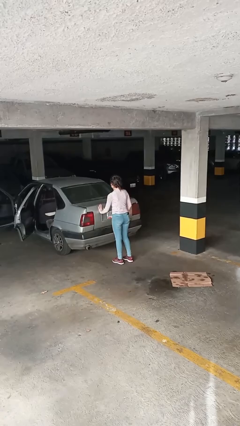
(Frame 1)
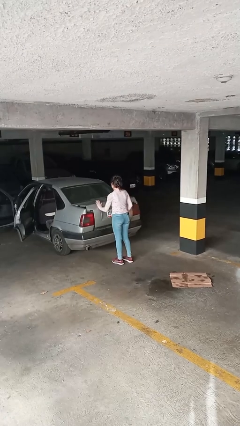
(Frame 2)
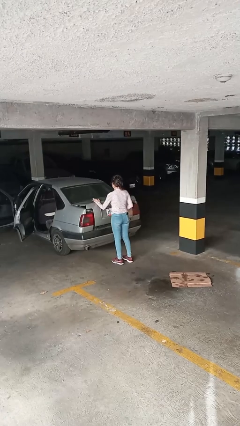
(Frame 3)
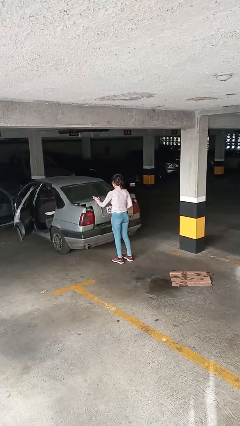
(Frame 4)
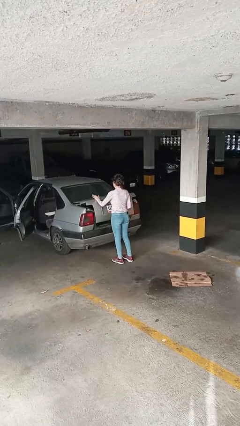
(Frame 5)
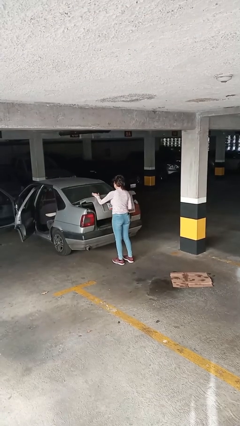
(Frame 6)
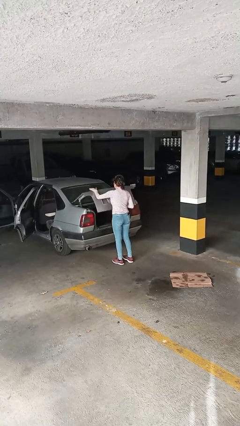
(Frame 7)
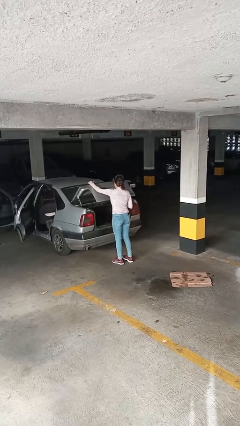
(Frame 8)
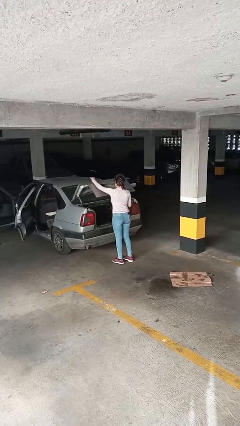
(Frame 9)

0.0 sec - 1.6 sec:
person opens car trunk

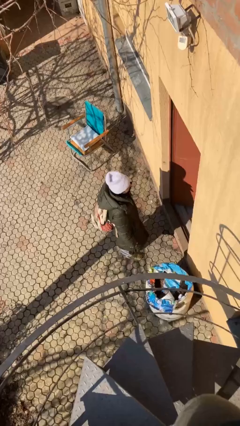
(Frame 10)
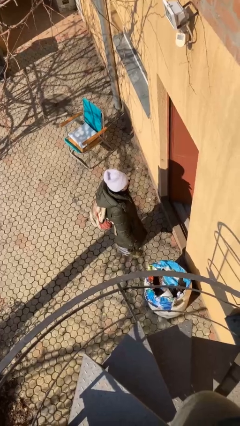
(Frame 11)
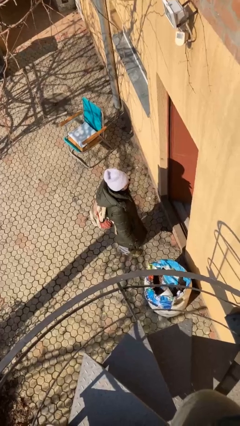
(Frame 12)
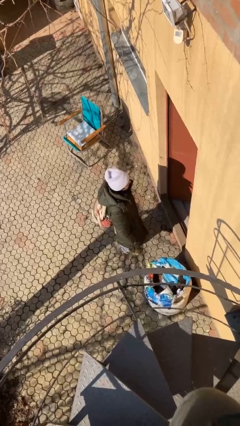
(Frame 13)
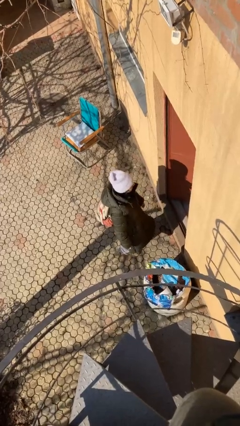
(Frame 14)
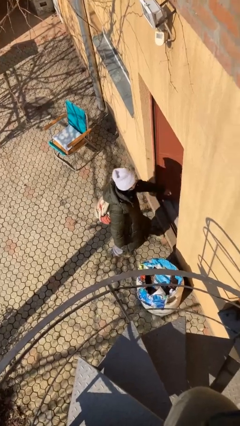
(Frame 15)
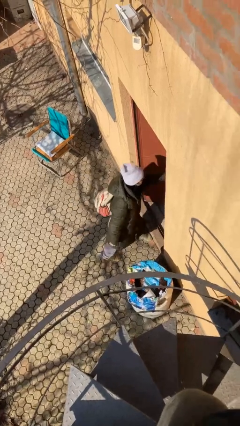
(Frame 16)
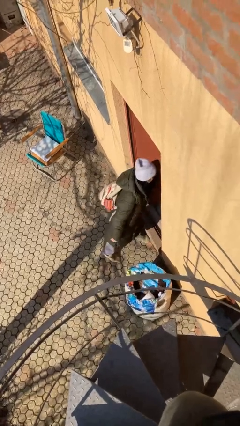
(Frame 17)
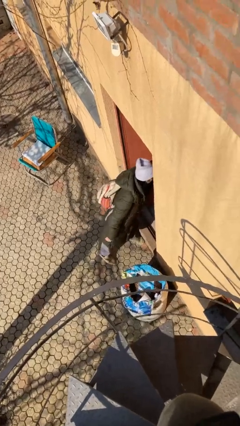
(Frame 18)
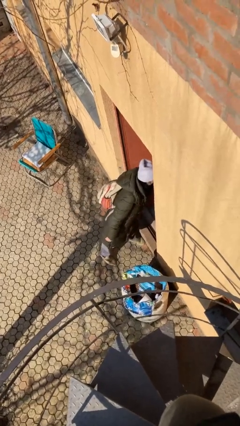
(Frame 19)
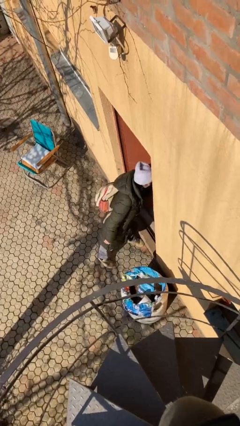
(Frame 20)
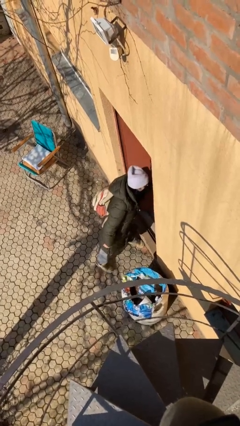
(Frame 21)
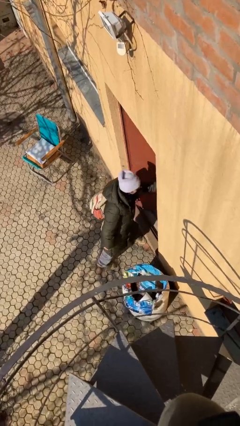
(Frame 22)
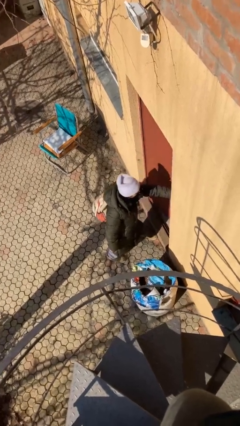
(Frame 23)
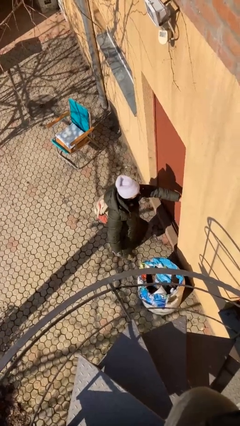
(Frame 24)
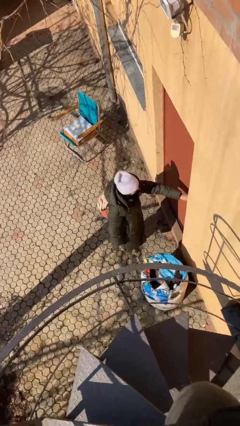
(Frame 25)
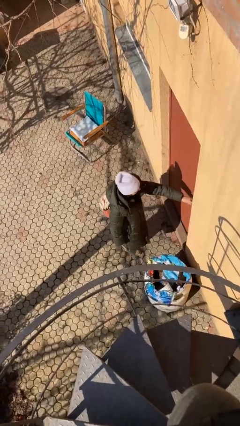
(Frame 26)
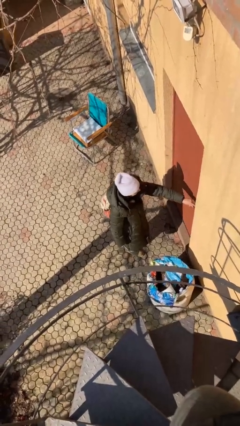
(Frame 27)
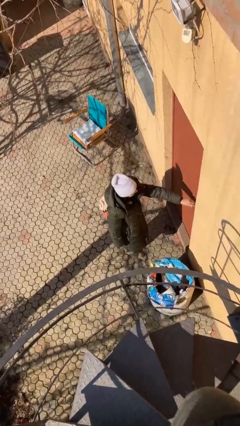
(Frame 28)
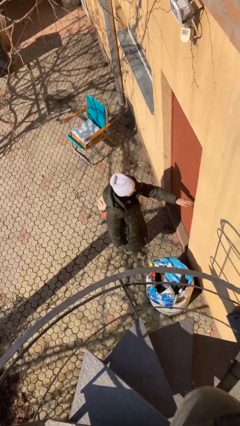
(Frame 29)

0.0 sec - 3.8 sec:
person closes facility door

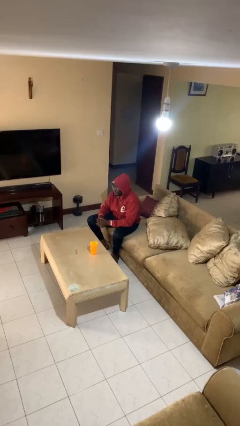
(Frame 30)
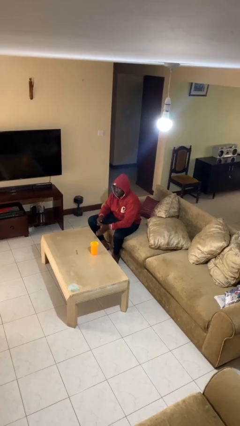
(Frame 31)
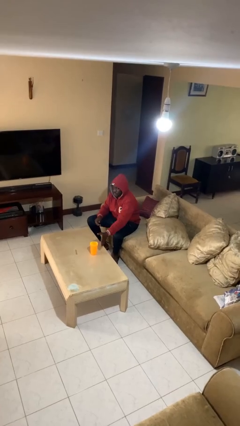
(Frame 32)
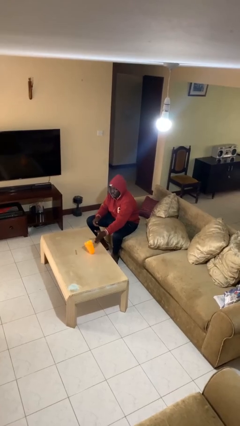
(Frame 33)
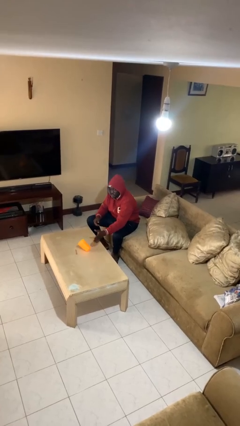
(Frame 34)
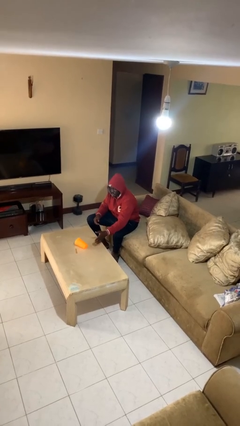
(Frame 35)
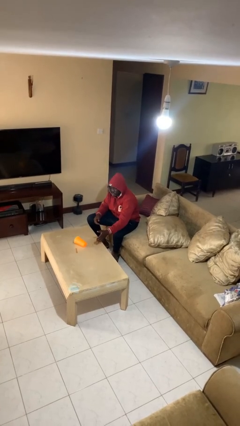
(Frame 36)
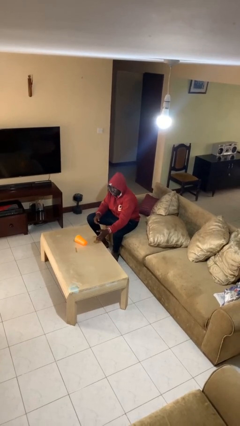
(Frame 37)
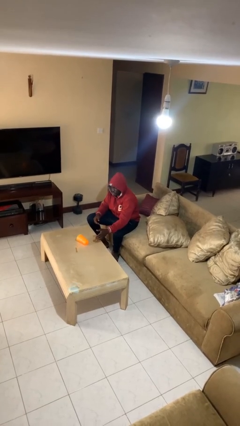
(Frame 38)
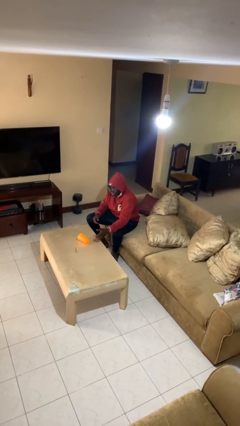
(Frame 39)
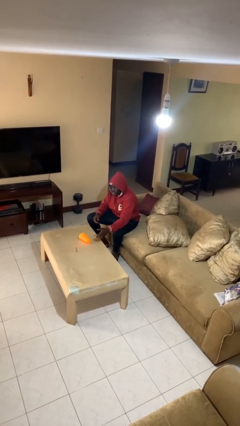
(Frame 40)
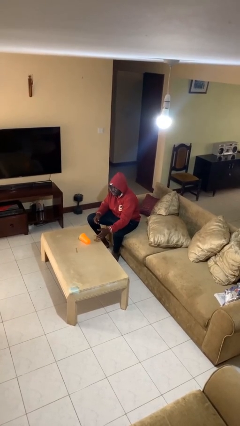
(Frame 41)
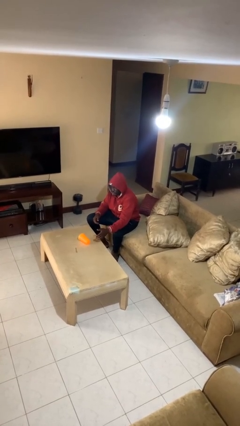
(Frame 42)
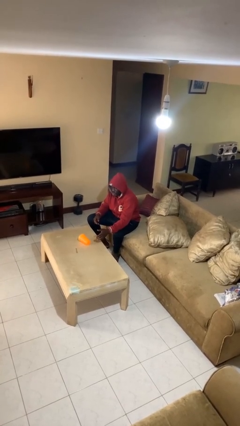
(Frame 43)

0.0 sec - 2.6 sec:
person knocks over glass

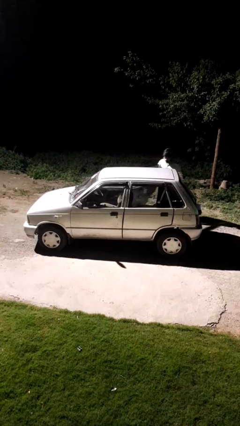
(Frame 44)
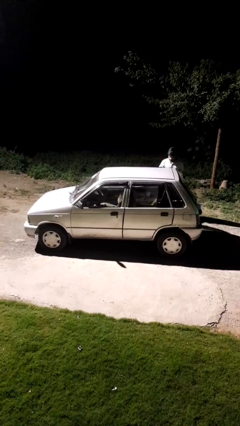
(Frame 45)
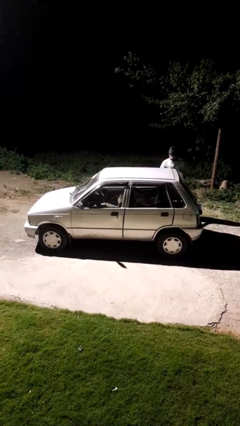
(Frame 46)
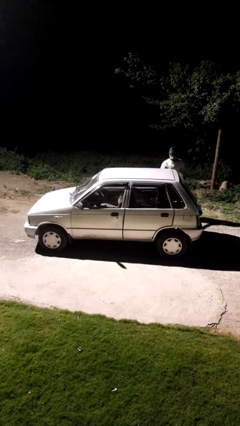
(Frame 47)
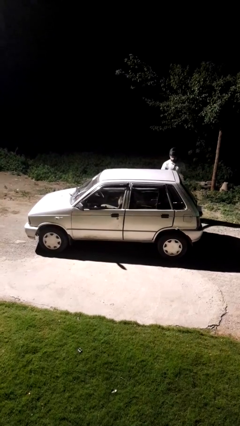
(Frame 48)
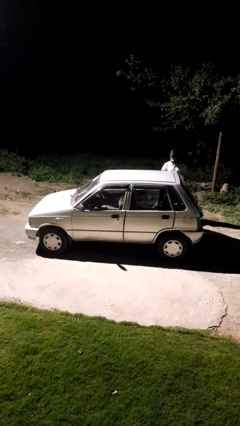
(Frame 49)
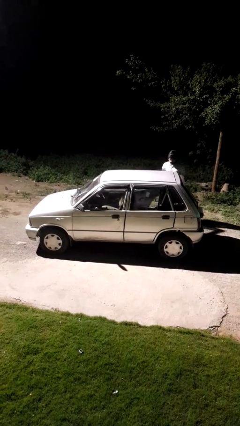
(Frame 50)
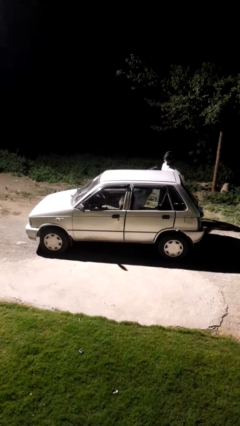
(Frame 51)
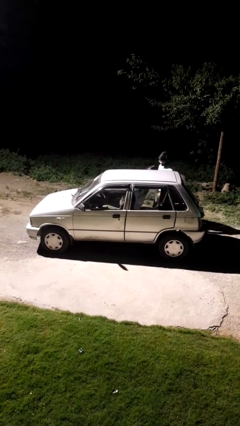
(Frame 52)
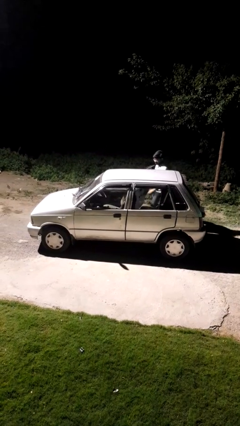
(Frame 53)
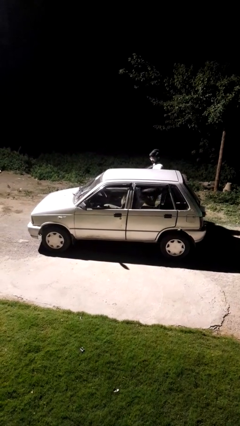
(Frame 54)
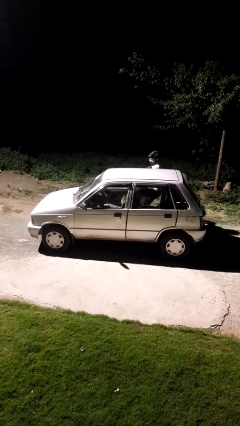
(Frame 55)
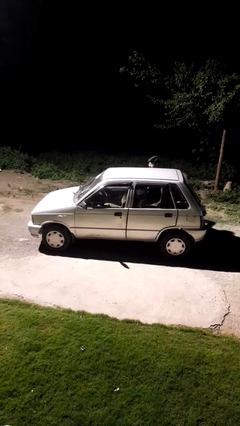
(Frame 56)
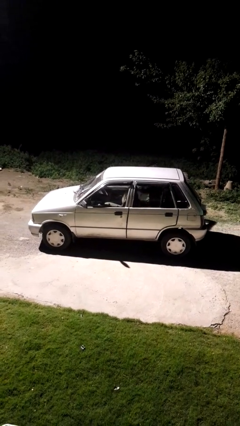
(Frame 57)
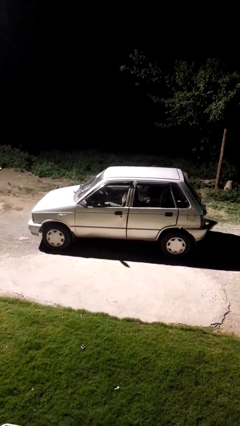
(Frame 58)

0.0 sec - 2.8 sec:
car picks up person

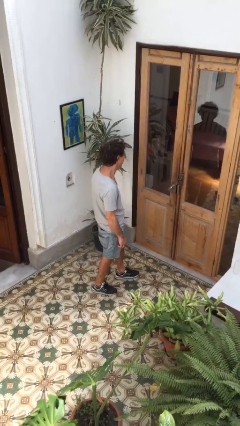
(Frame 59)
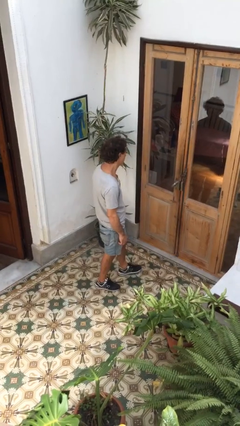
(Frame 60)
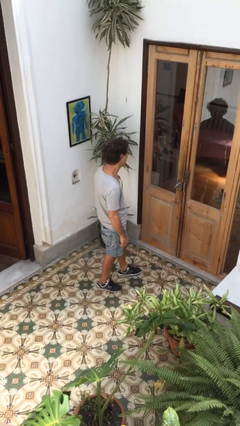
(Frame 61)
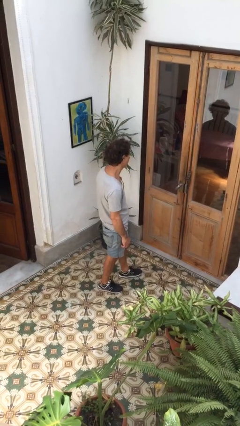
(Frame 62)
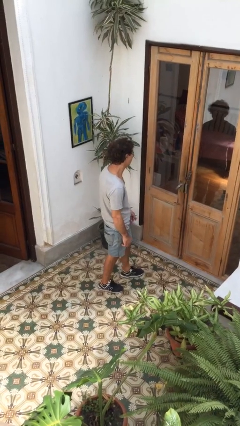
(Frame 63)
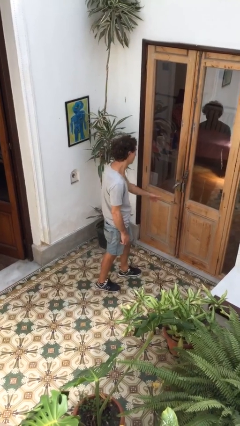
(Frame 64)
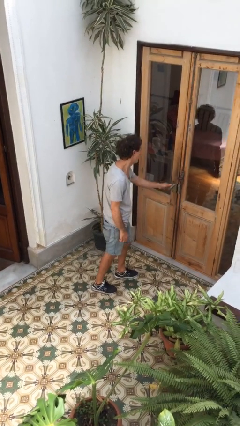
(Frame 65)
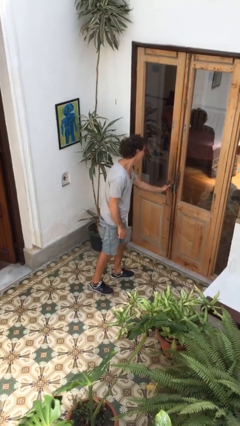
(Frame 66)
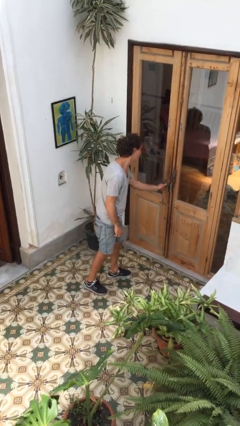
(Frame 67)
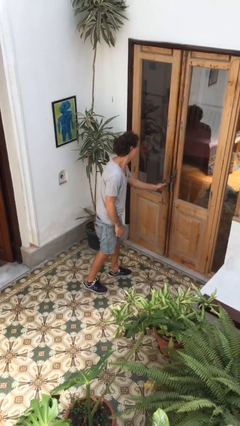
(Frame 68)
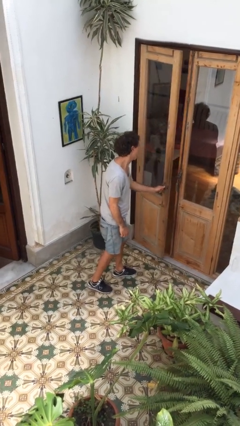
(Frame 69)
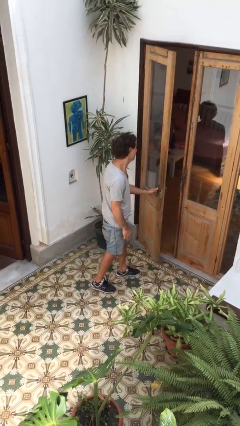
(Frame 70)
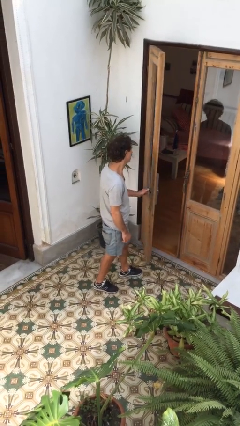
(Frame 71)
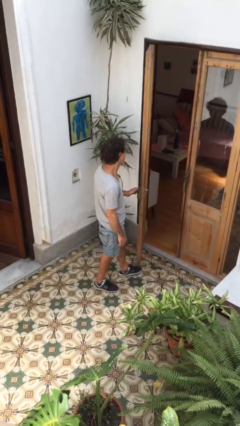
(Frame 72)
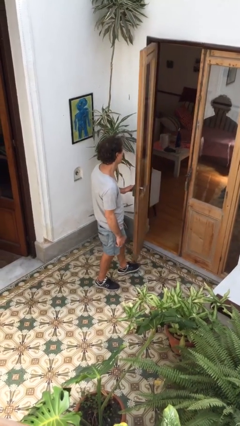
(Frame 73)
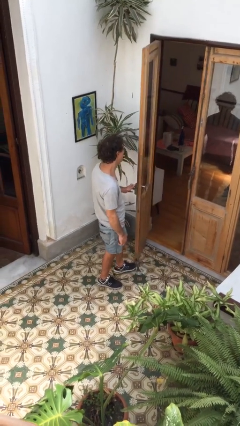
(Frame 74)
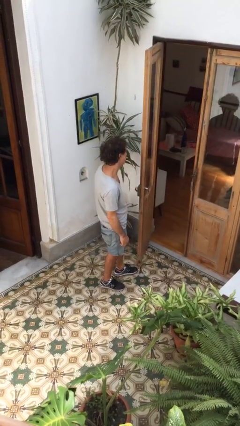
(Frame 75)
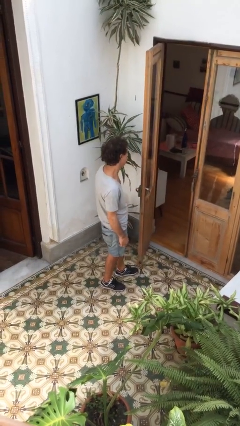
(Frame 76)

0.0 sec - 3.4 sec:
person opens facility door

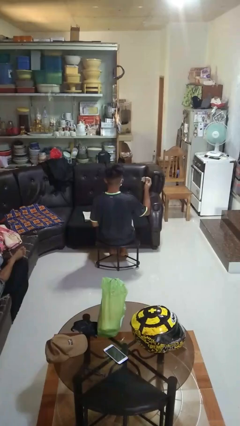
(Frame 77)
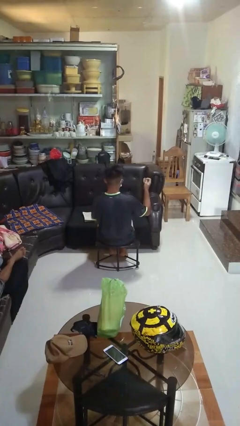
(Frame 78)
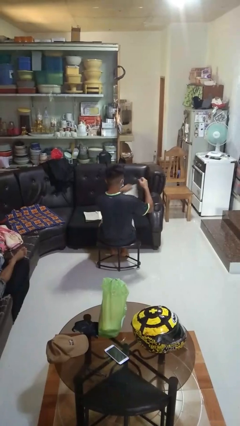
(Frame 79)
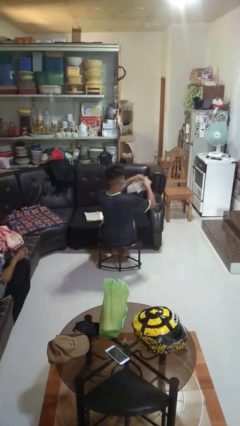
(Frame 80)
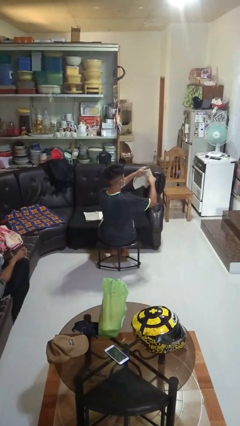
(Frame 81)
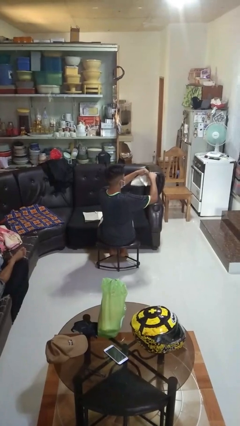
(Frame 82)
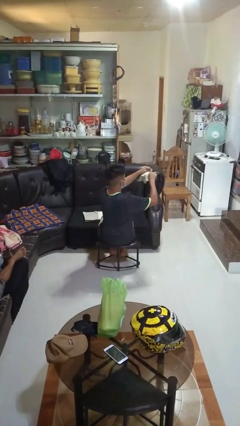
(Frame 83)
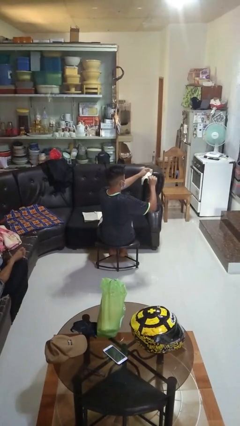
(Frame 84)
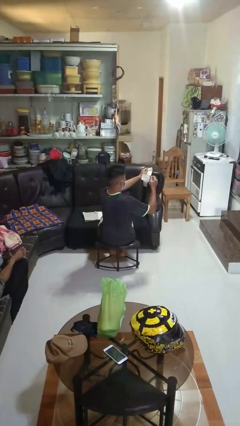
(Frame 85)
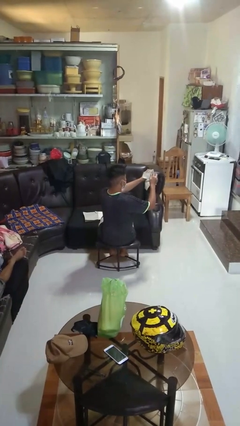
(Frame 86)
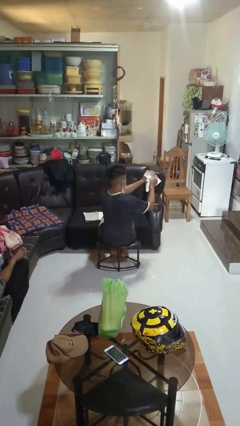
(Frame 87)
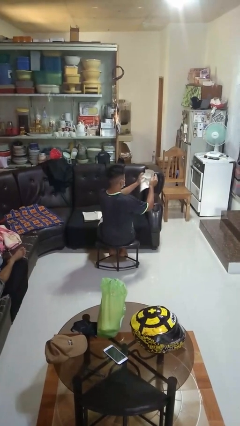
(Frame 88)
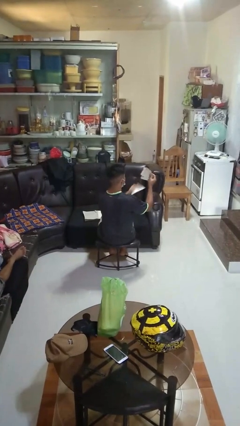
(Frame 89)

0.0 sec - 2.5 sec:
person tears paper

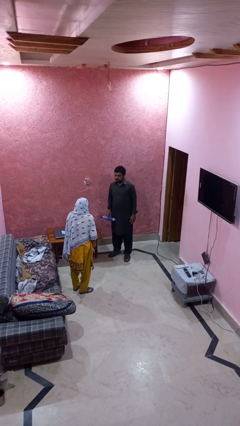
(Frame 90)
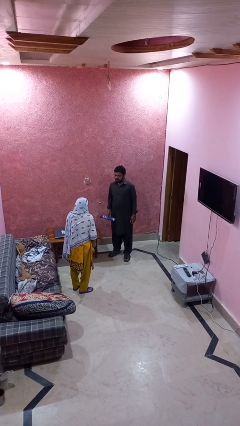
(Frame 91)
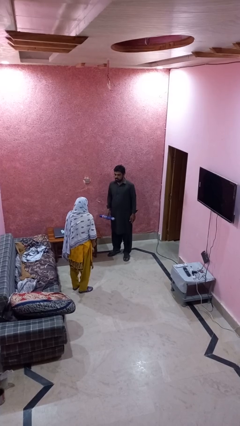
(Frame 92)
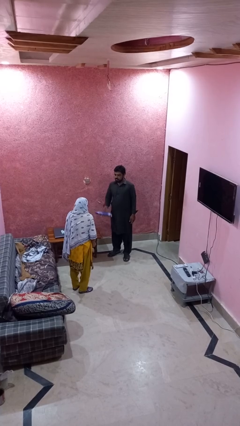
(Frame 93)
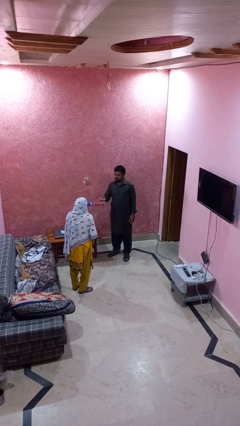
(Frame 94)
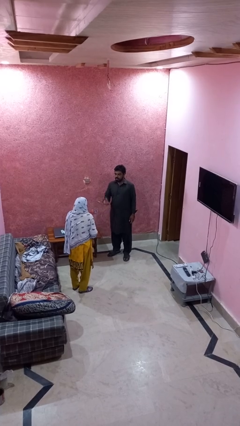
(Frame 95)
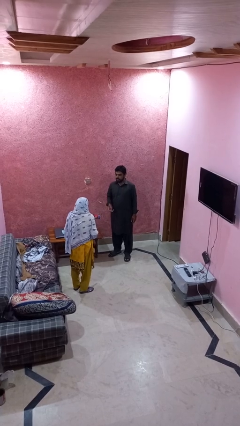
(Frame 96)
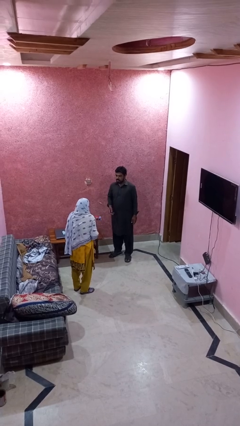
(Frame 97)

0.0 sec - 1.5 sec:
person throws object to person
